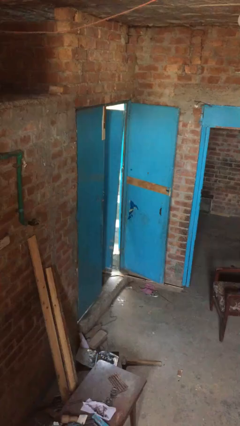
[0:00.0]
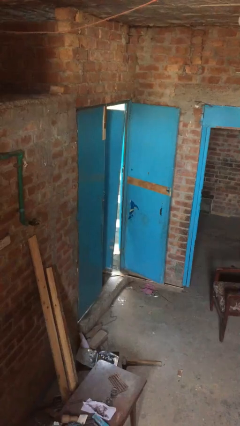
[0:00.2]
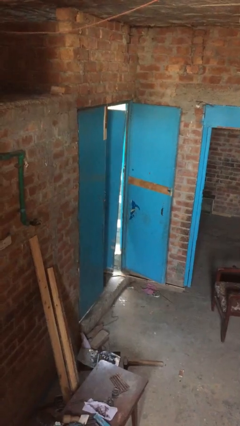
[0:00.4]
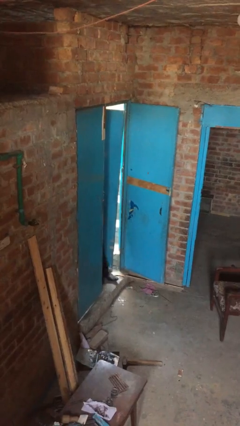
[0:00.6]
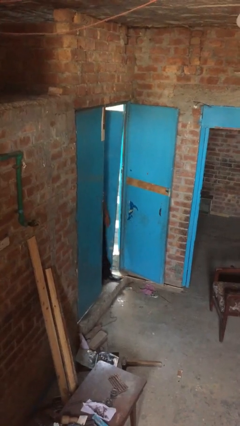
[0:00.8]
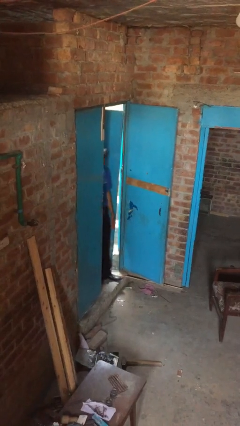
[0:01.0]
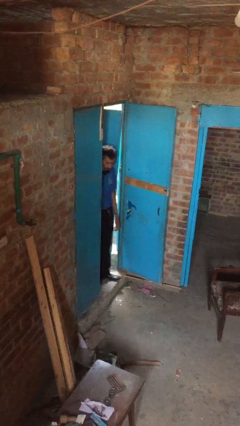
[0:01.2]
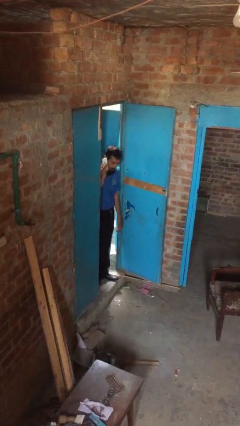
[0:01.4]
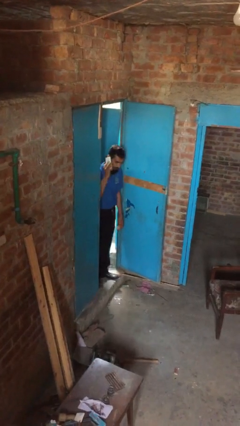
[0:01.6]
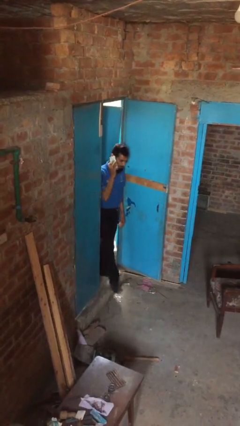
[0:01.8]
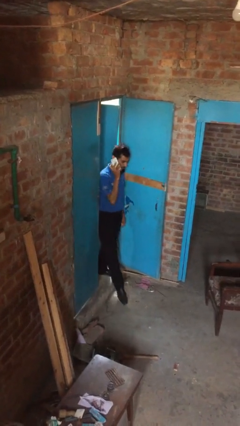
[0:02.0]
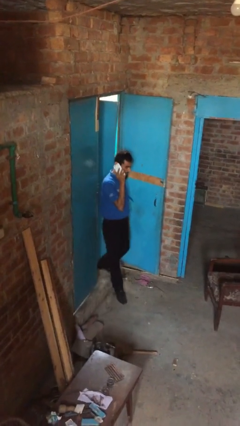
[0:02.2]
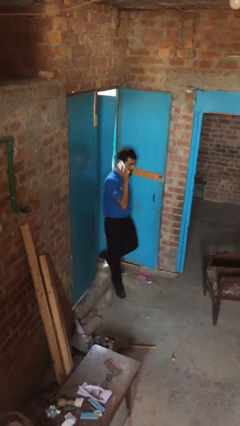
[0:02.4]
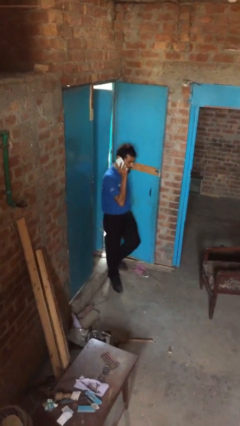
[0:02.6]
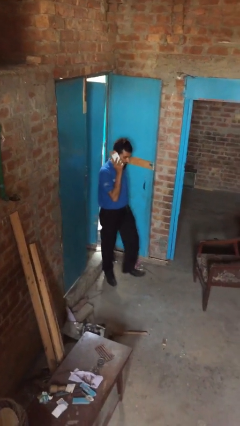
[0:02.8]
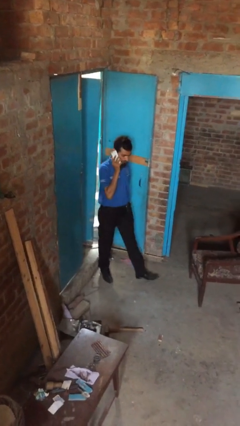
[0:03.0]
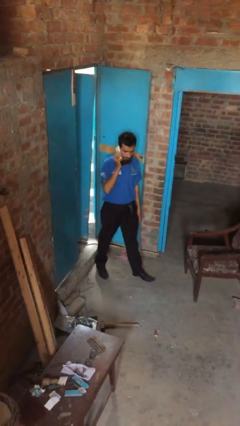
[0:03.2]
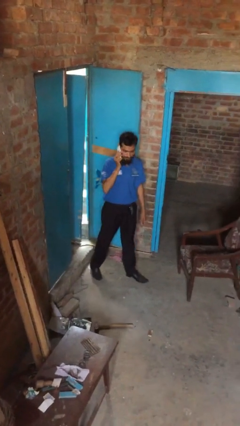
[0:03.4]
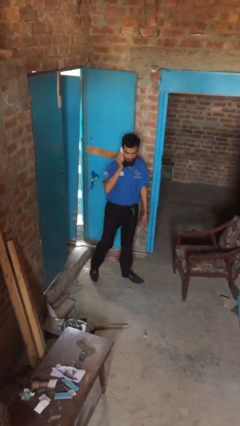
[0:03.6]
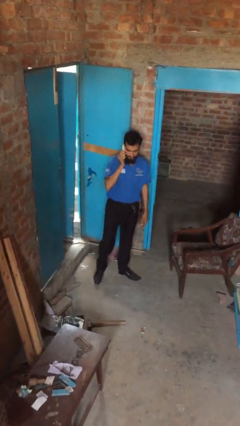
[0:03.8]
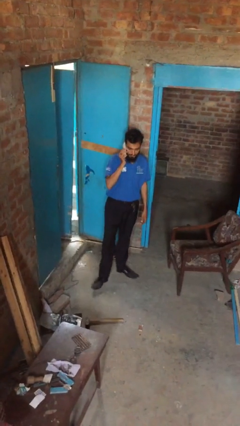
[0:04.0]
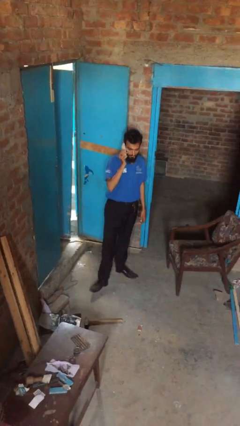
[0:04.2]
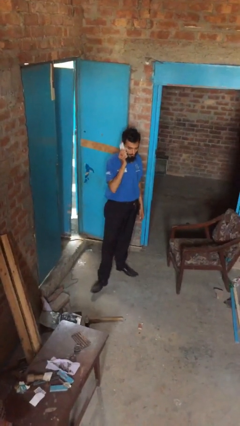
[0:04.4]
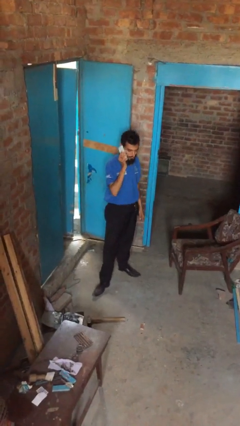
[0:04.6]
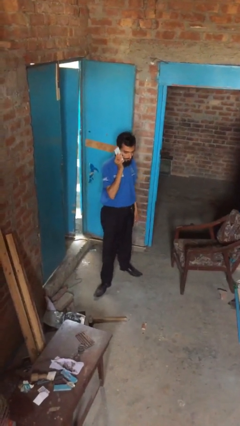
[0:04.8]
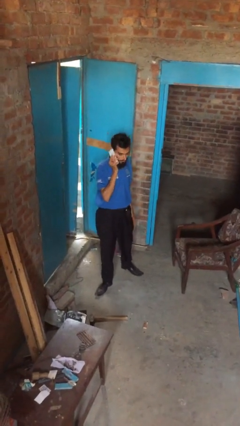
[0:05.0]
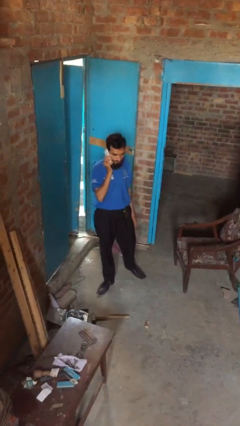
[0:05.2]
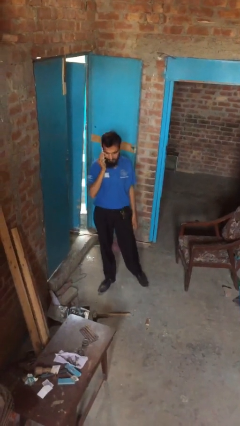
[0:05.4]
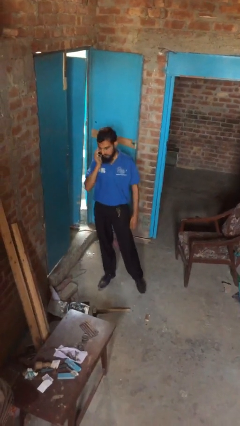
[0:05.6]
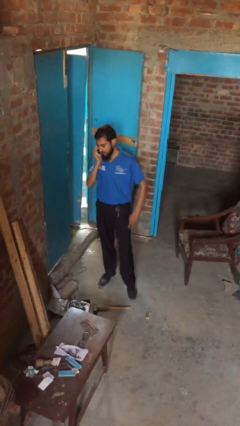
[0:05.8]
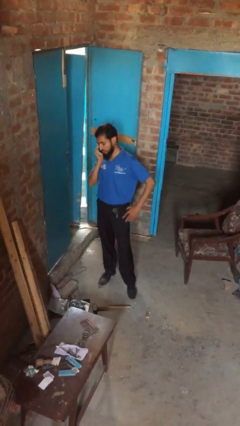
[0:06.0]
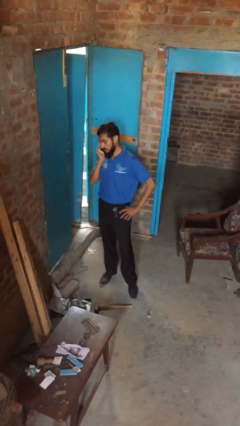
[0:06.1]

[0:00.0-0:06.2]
person enters scene through structure

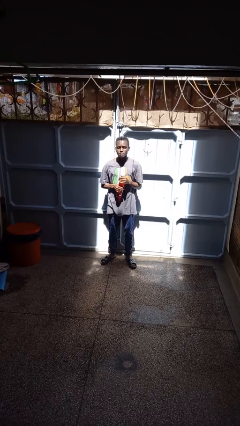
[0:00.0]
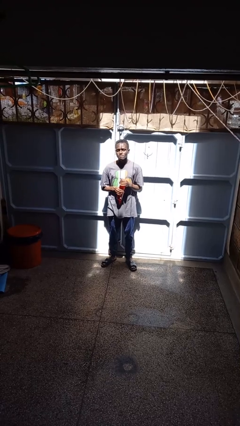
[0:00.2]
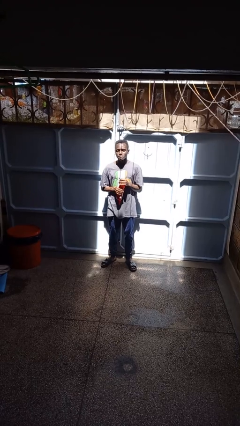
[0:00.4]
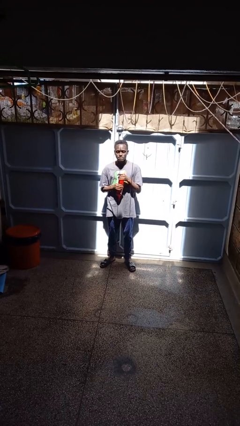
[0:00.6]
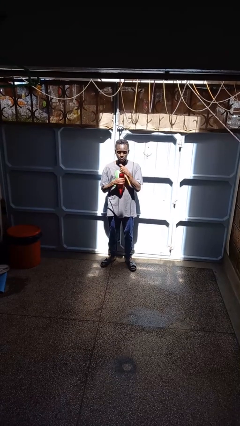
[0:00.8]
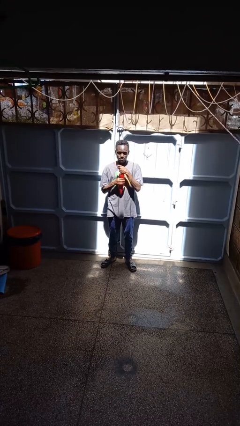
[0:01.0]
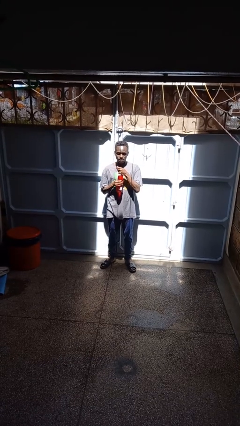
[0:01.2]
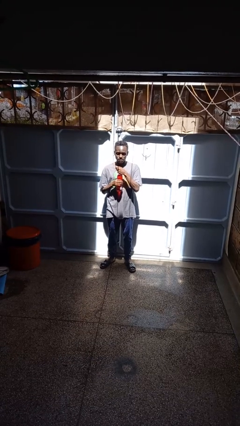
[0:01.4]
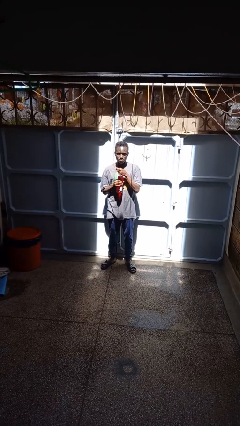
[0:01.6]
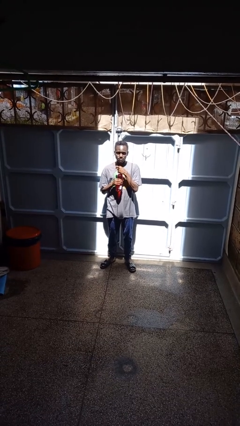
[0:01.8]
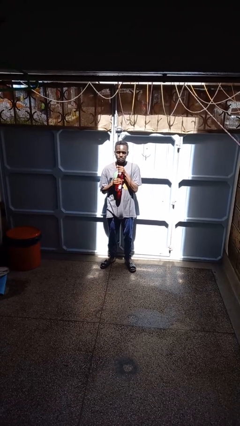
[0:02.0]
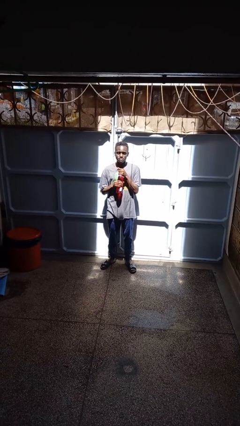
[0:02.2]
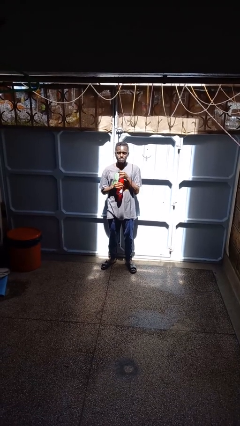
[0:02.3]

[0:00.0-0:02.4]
person opens beverage can

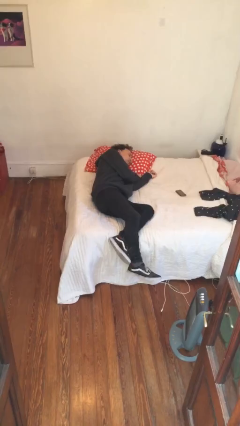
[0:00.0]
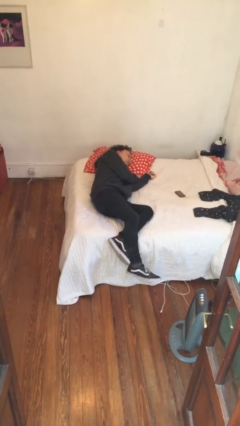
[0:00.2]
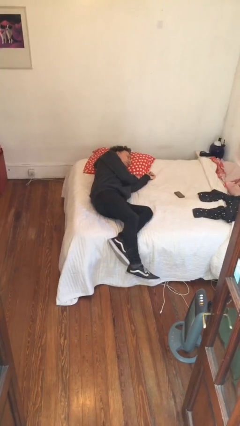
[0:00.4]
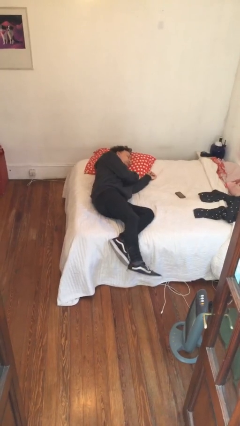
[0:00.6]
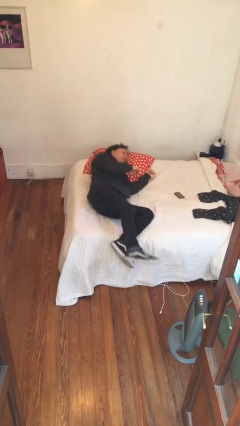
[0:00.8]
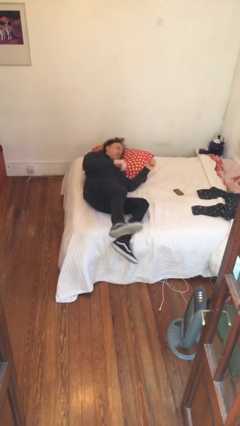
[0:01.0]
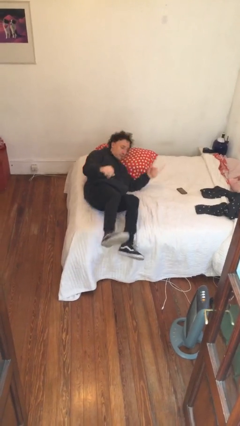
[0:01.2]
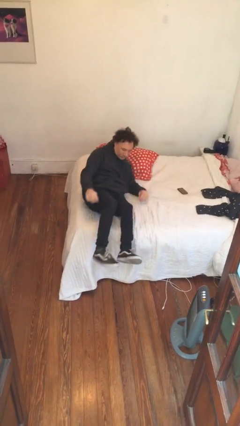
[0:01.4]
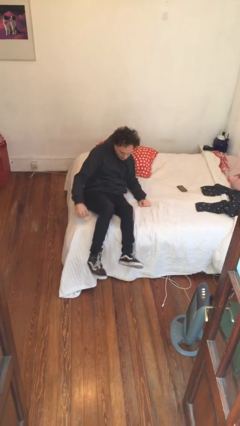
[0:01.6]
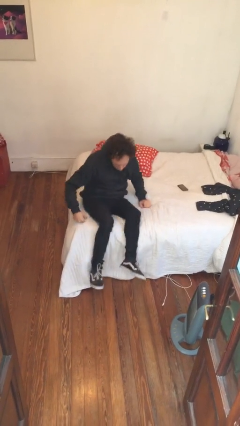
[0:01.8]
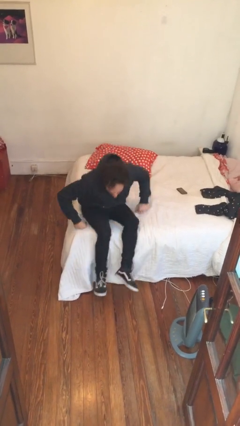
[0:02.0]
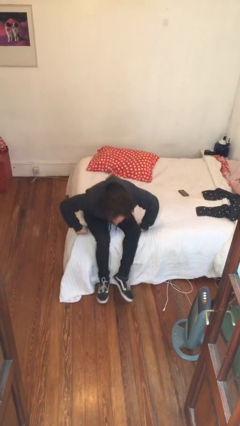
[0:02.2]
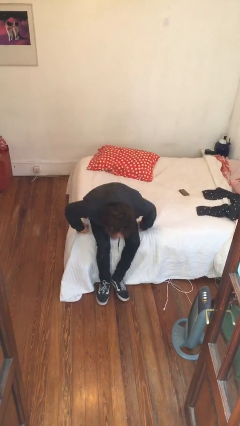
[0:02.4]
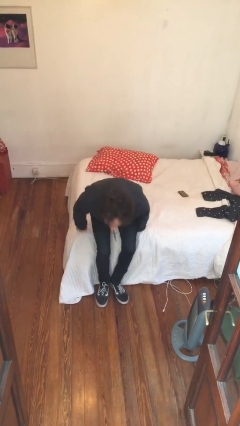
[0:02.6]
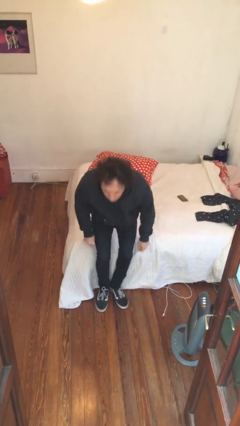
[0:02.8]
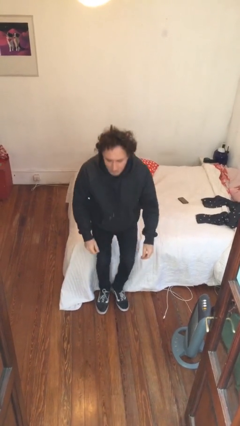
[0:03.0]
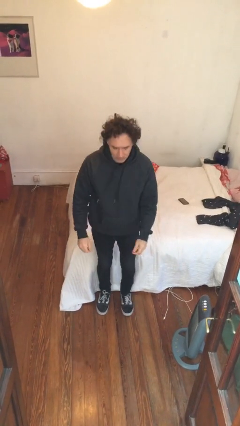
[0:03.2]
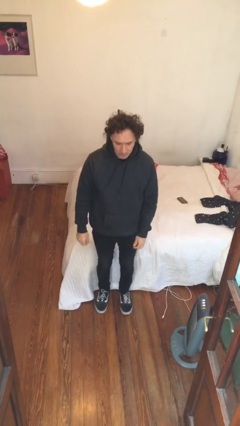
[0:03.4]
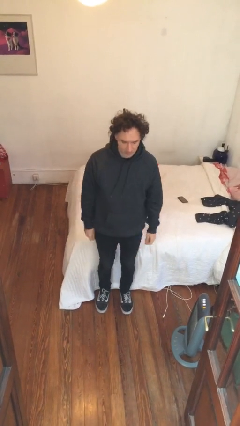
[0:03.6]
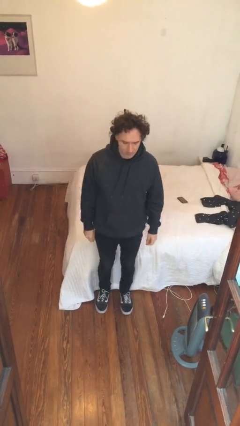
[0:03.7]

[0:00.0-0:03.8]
person stands up

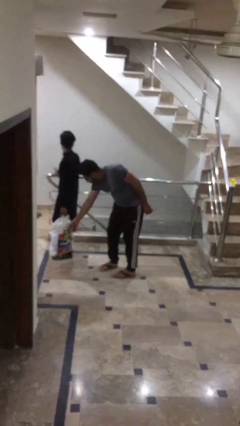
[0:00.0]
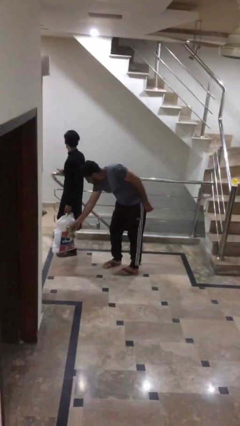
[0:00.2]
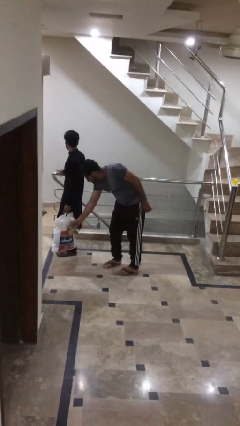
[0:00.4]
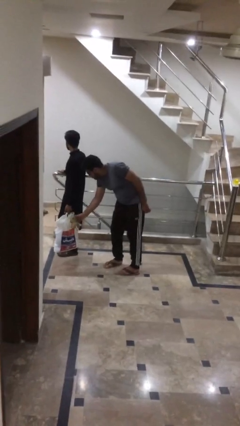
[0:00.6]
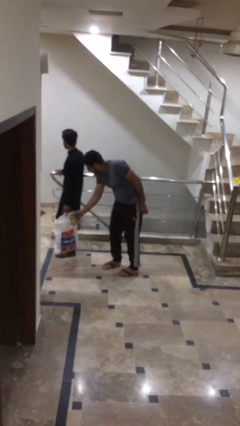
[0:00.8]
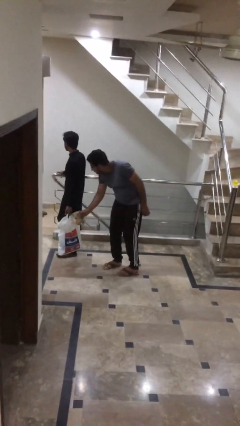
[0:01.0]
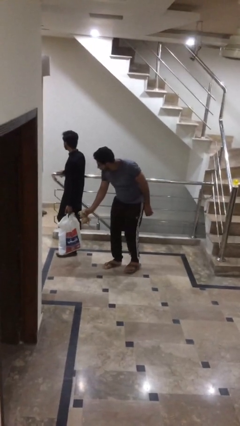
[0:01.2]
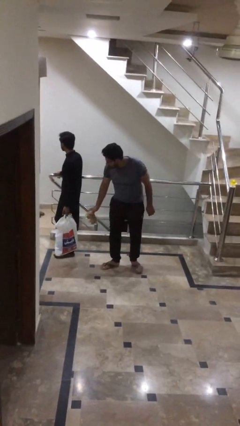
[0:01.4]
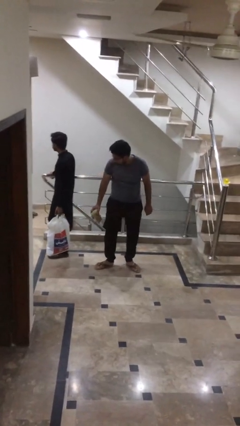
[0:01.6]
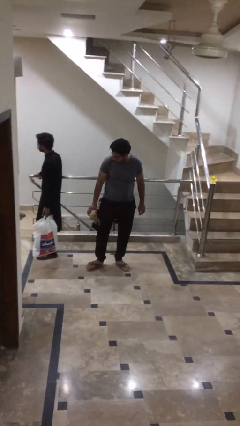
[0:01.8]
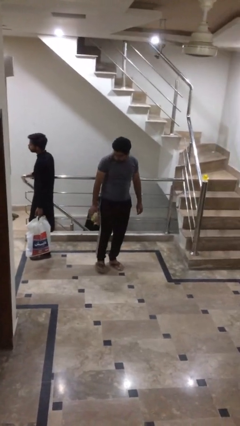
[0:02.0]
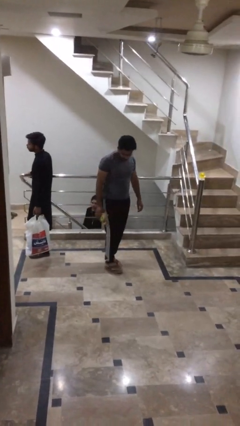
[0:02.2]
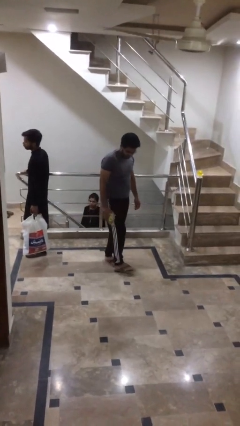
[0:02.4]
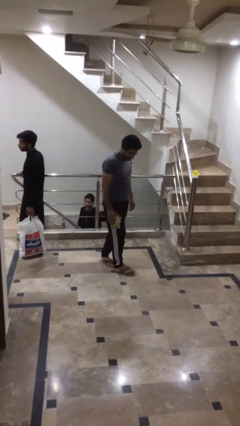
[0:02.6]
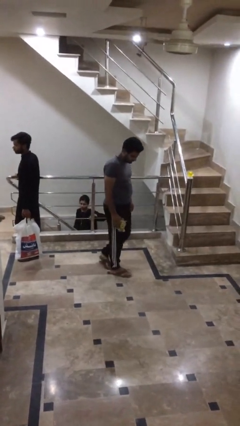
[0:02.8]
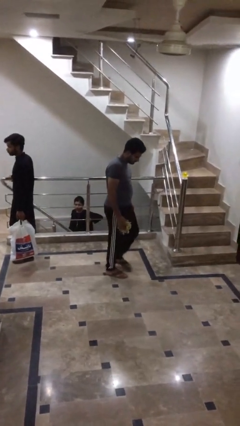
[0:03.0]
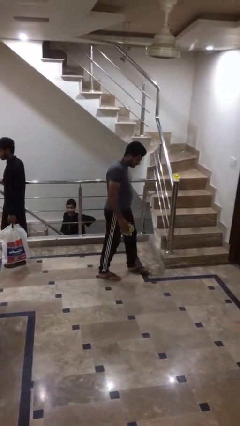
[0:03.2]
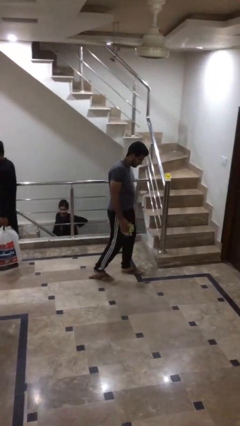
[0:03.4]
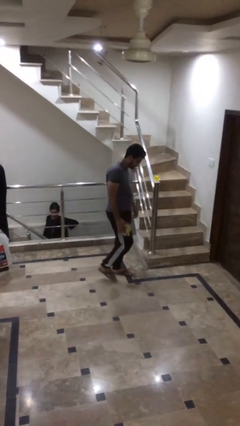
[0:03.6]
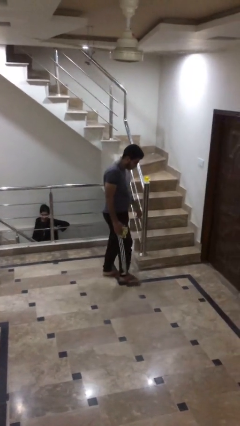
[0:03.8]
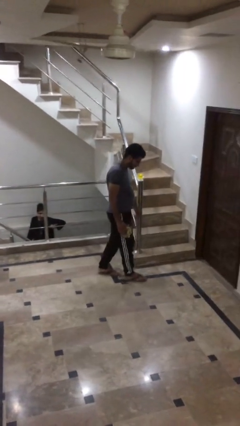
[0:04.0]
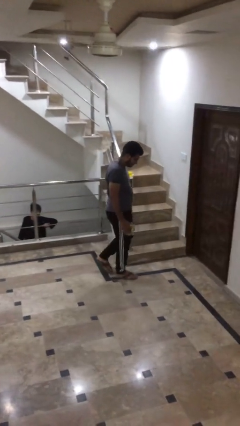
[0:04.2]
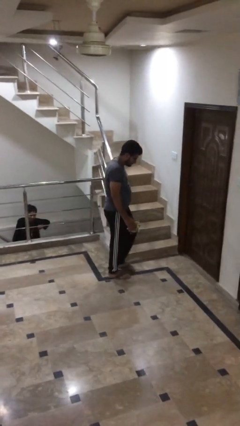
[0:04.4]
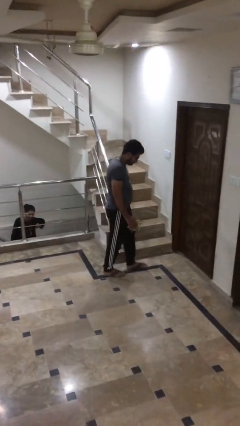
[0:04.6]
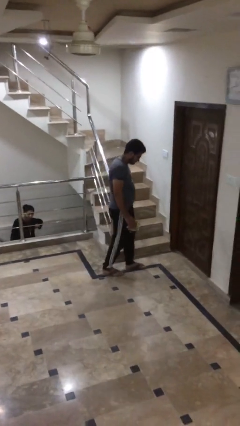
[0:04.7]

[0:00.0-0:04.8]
person steals object from person

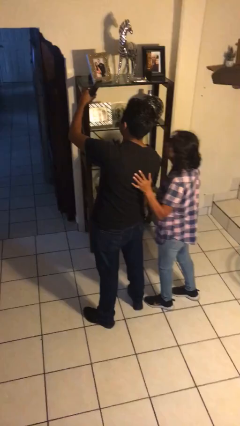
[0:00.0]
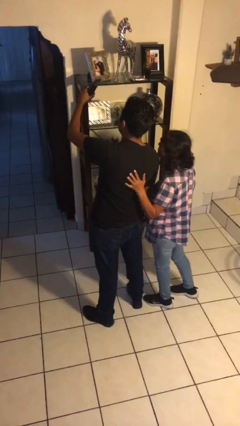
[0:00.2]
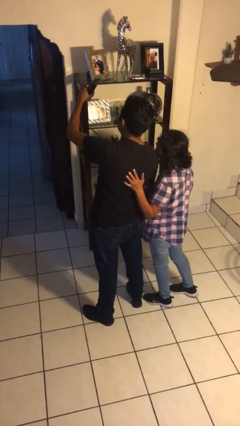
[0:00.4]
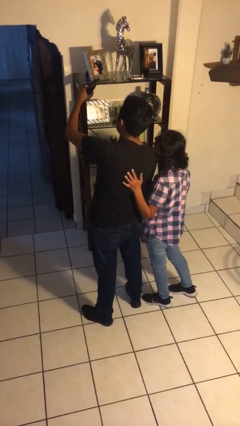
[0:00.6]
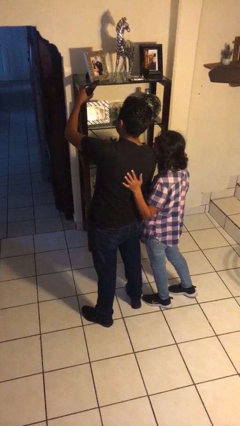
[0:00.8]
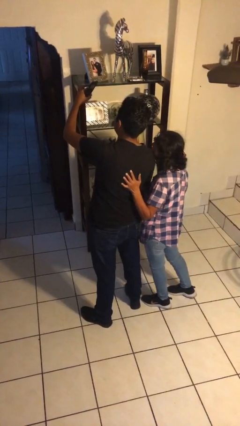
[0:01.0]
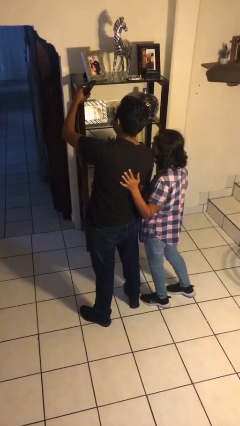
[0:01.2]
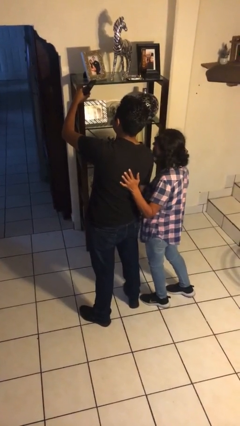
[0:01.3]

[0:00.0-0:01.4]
person takes selfie with person
